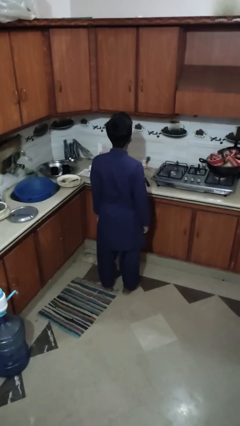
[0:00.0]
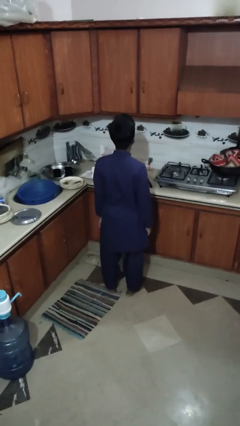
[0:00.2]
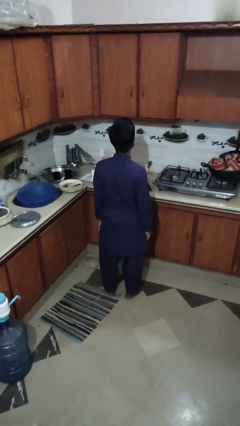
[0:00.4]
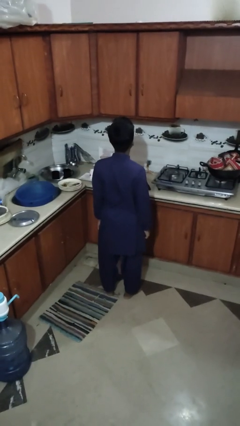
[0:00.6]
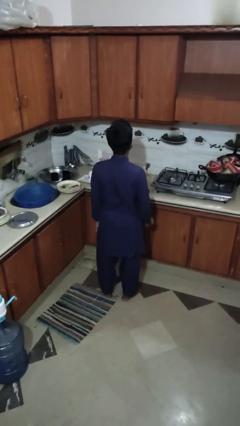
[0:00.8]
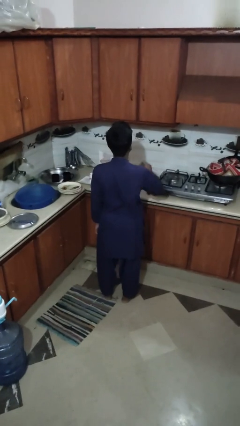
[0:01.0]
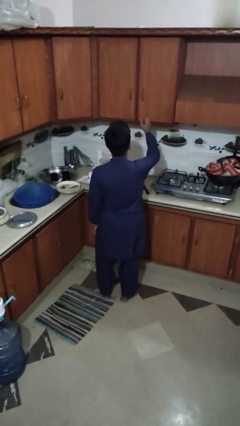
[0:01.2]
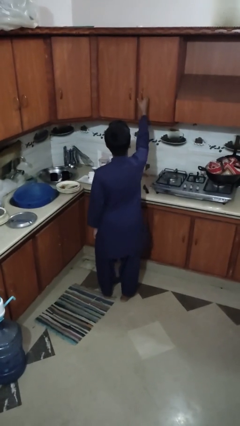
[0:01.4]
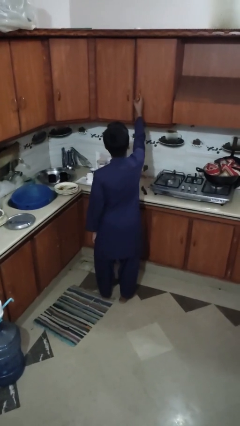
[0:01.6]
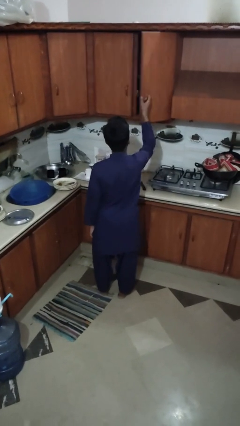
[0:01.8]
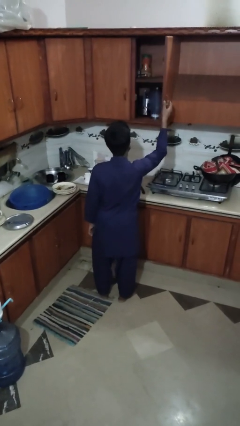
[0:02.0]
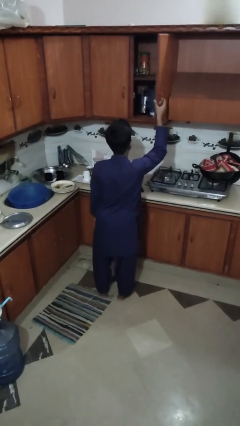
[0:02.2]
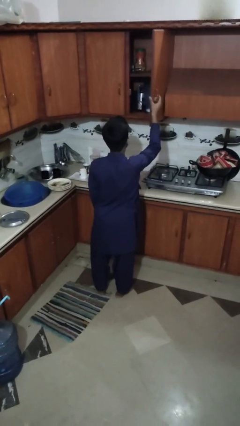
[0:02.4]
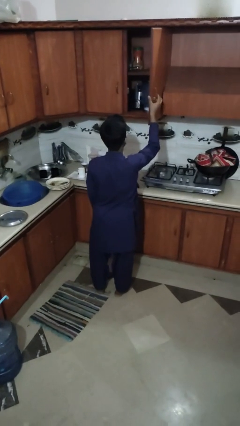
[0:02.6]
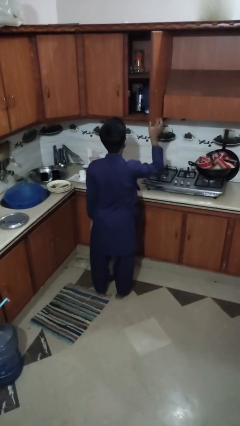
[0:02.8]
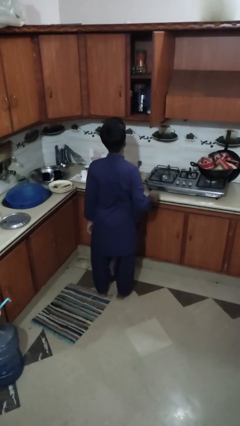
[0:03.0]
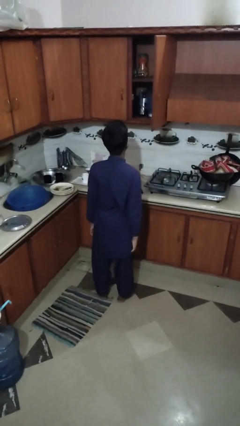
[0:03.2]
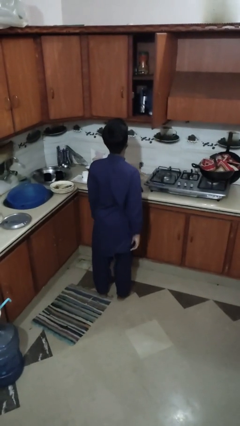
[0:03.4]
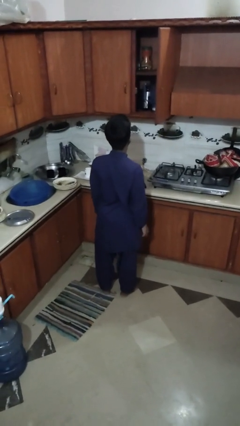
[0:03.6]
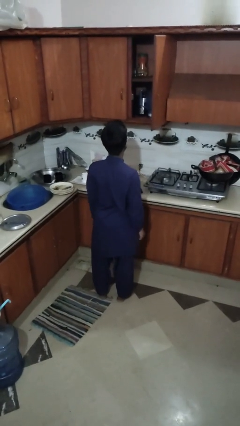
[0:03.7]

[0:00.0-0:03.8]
person opens cabinet

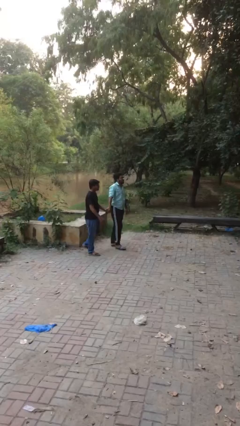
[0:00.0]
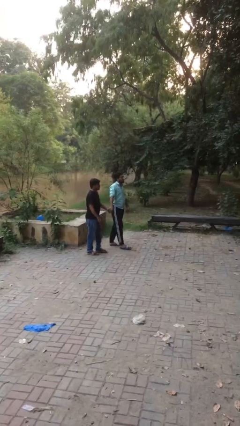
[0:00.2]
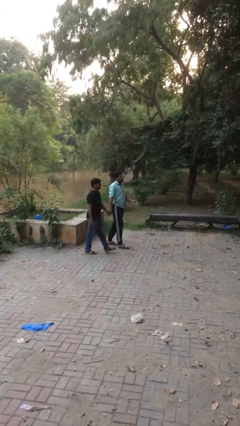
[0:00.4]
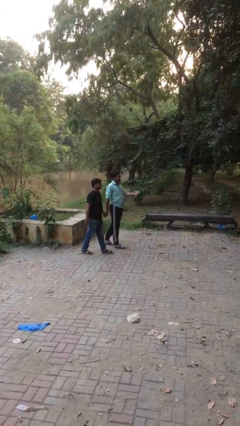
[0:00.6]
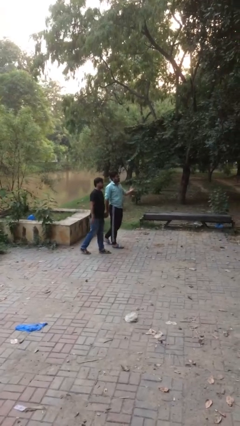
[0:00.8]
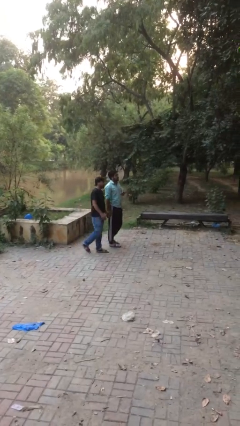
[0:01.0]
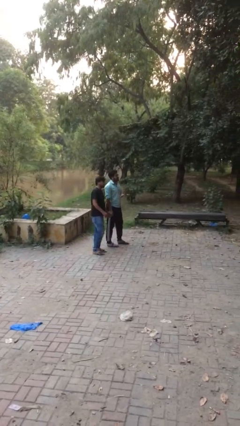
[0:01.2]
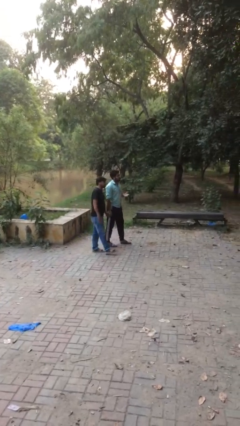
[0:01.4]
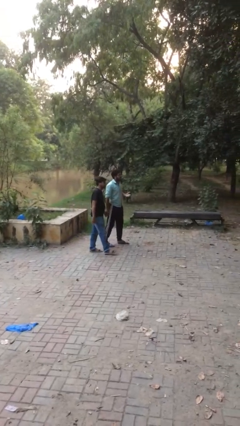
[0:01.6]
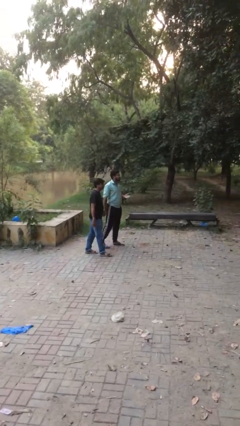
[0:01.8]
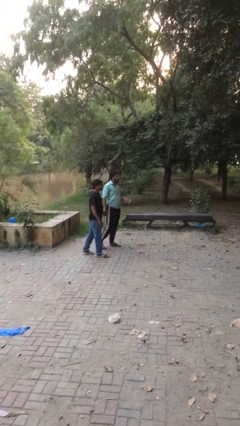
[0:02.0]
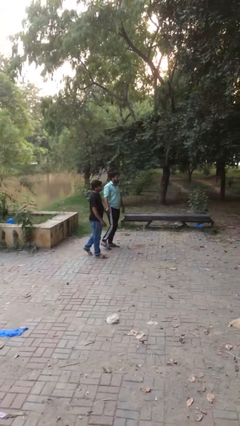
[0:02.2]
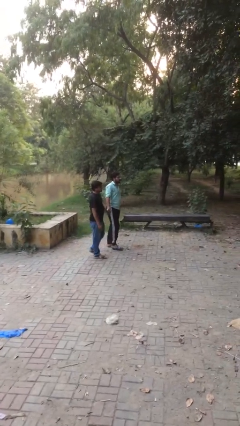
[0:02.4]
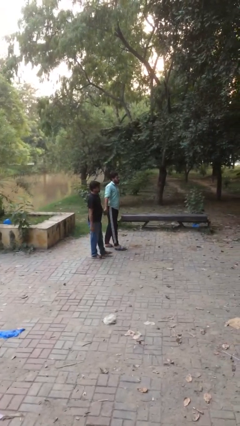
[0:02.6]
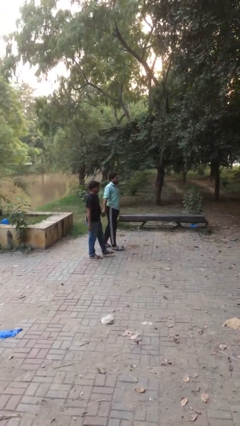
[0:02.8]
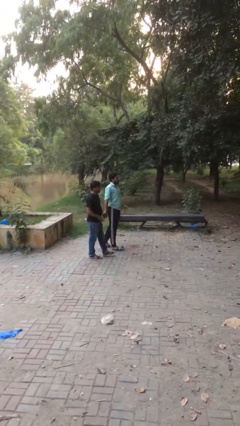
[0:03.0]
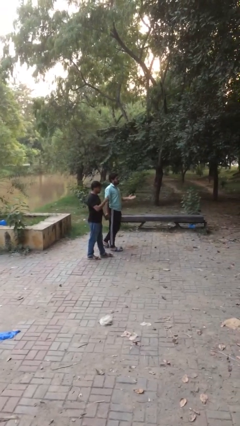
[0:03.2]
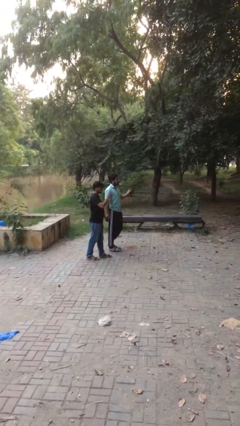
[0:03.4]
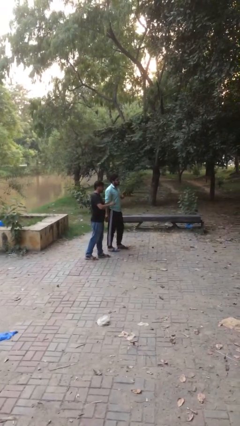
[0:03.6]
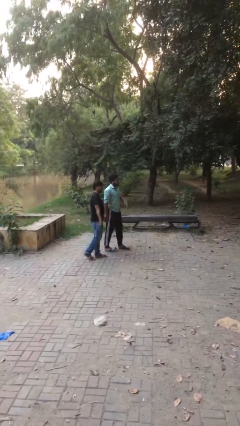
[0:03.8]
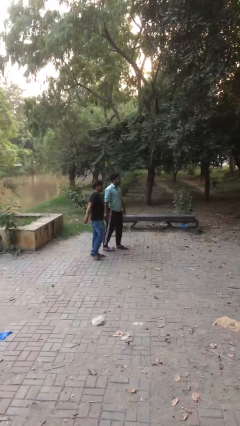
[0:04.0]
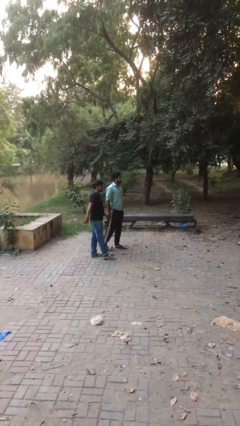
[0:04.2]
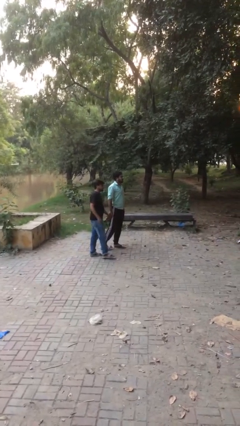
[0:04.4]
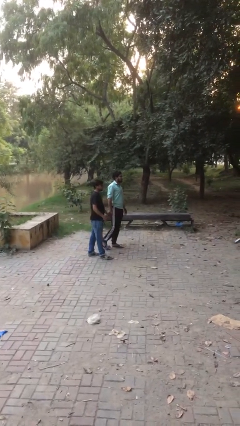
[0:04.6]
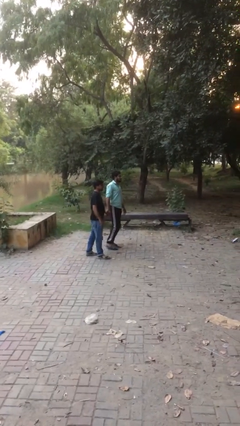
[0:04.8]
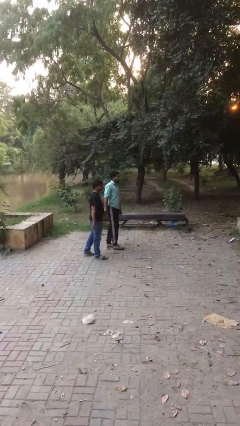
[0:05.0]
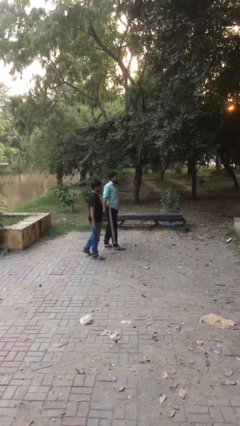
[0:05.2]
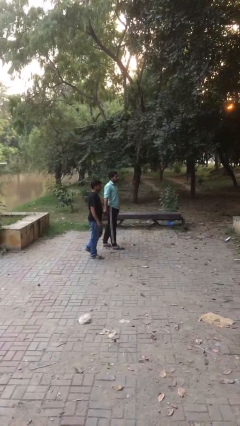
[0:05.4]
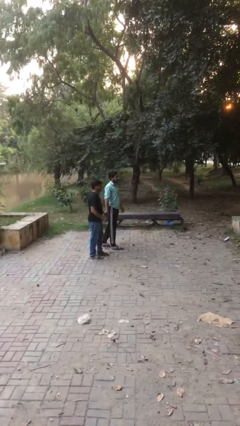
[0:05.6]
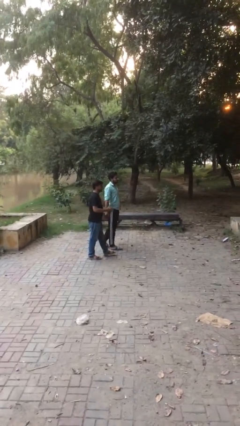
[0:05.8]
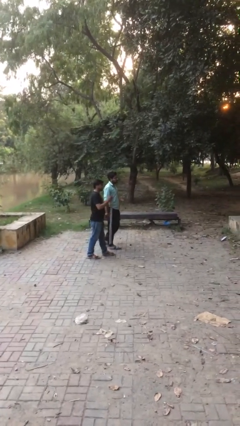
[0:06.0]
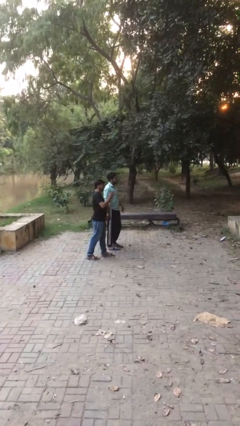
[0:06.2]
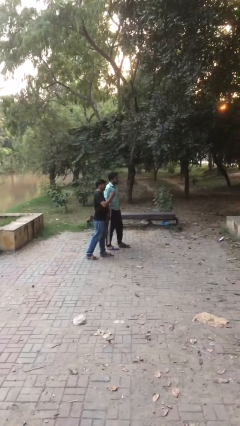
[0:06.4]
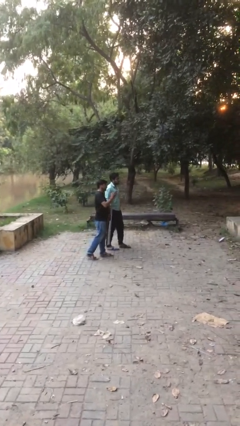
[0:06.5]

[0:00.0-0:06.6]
person holds hand

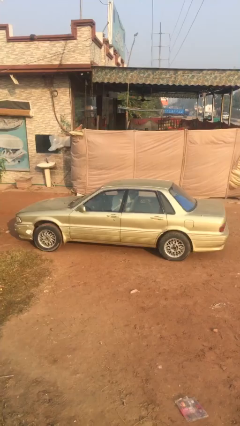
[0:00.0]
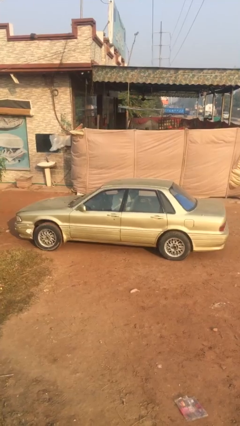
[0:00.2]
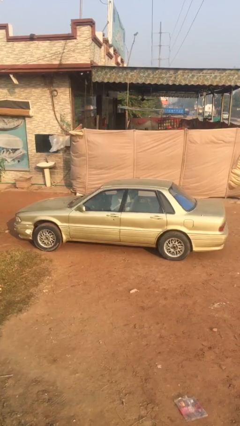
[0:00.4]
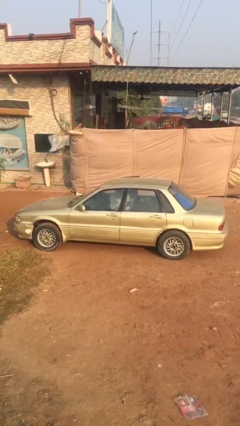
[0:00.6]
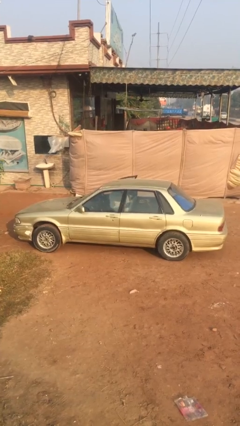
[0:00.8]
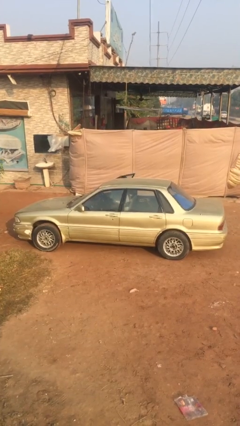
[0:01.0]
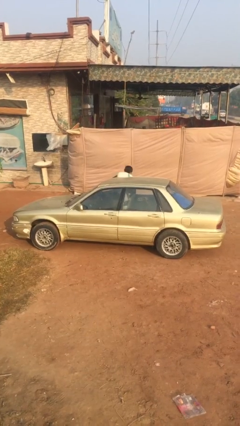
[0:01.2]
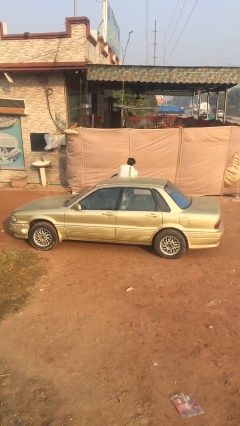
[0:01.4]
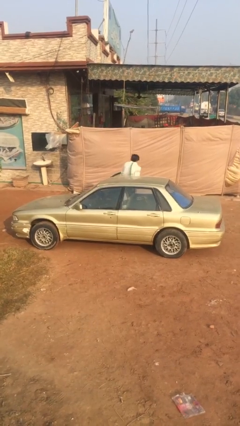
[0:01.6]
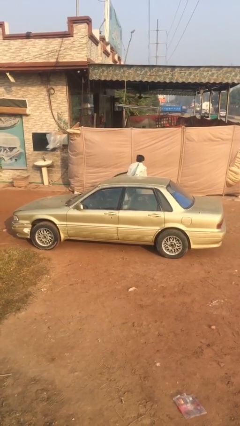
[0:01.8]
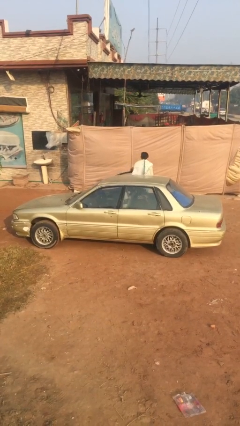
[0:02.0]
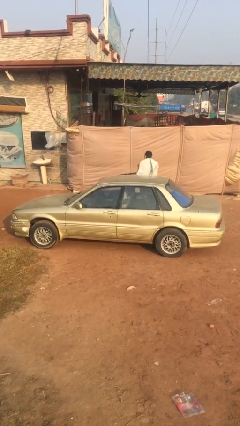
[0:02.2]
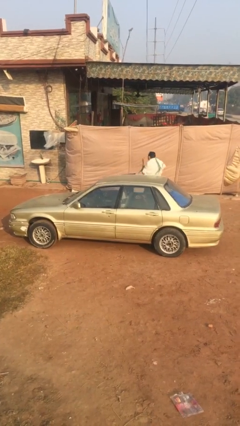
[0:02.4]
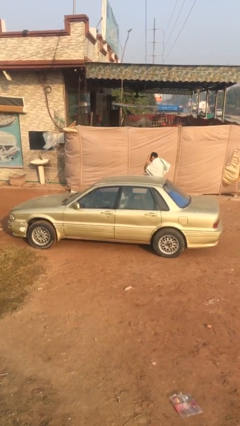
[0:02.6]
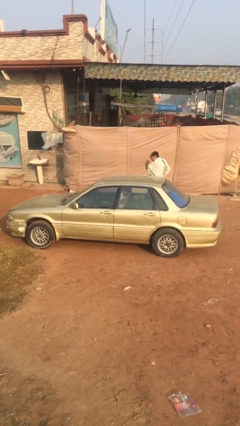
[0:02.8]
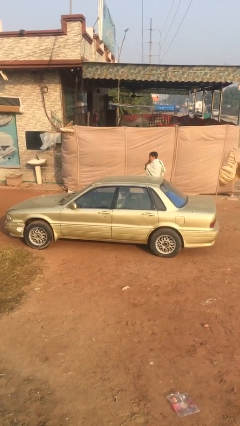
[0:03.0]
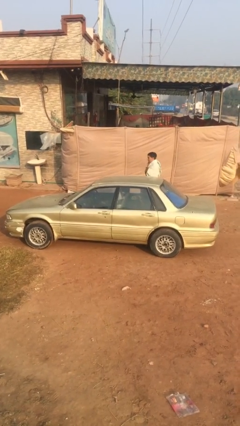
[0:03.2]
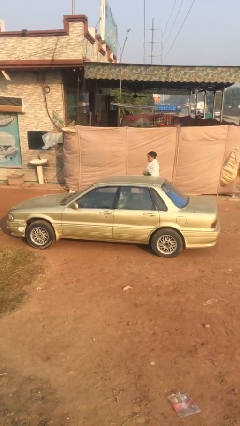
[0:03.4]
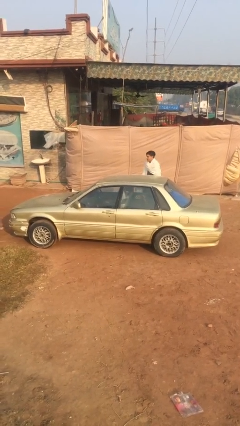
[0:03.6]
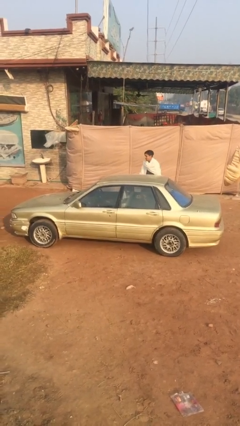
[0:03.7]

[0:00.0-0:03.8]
car drops off person

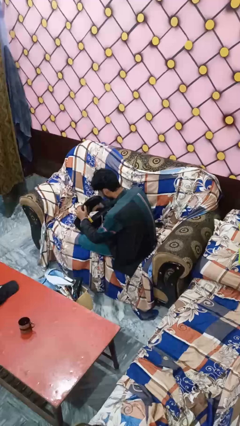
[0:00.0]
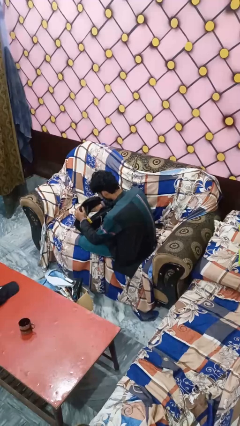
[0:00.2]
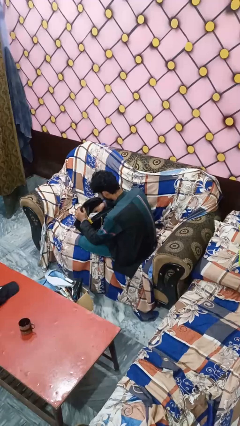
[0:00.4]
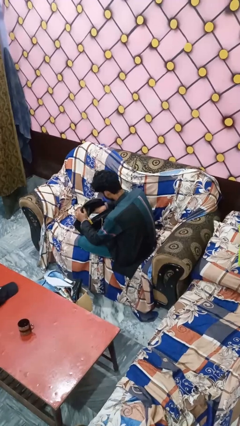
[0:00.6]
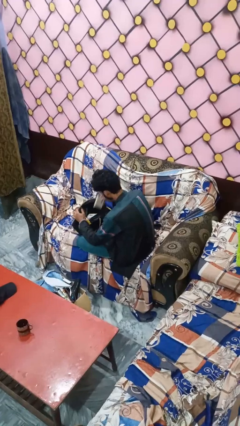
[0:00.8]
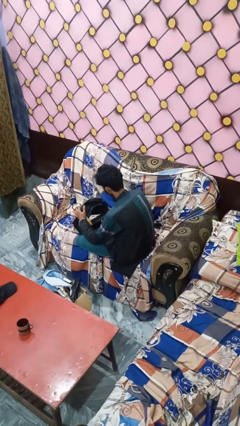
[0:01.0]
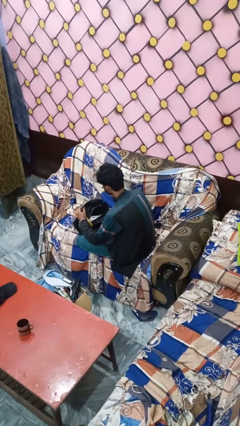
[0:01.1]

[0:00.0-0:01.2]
person searches in bag

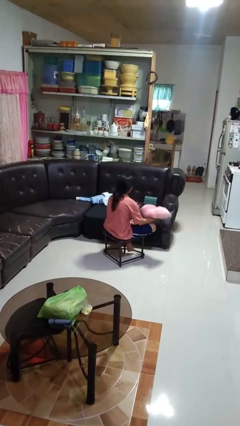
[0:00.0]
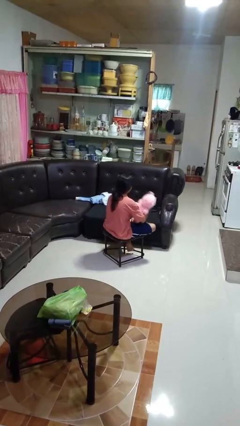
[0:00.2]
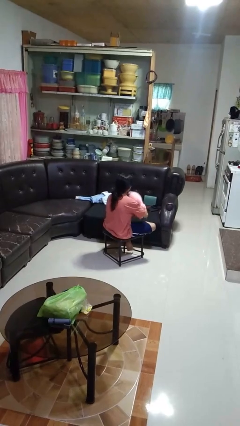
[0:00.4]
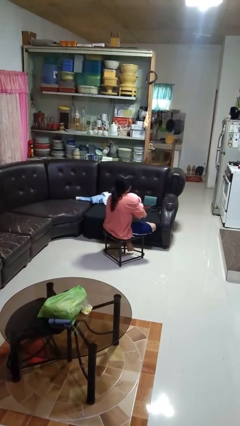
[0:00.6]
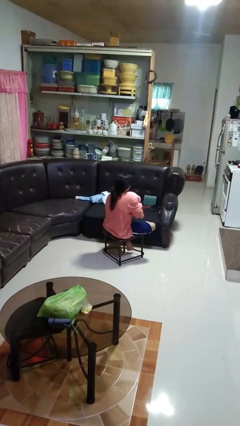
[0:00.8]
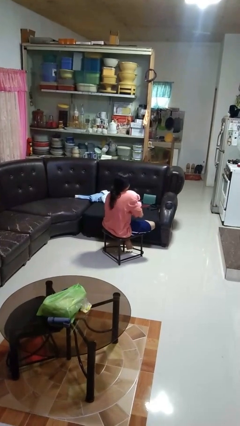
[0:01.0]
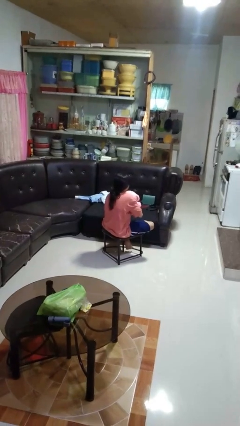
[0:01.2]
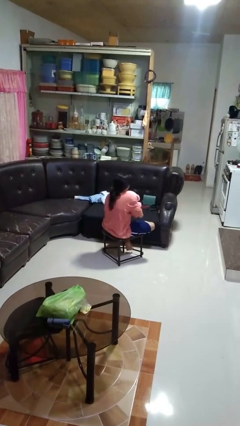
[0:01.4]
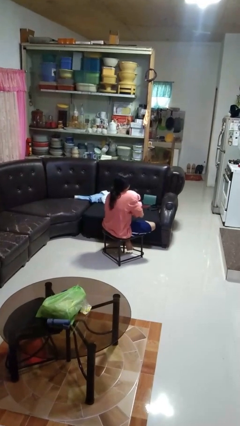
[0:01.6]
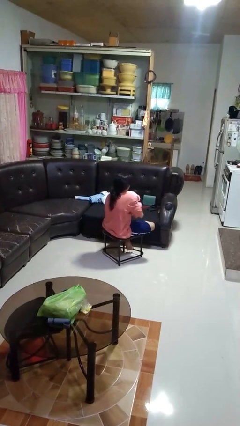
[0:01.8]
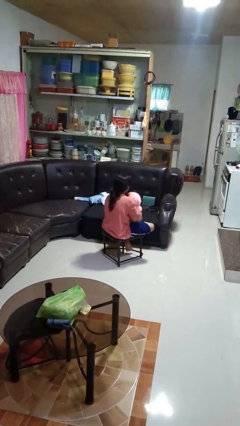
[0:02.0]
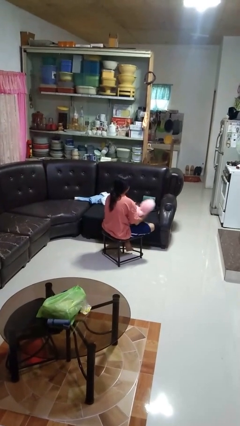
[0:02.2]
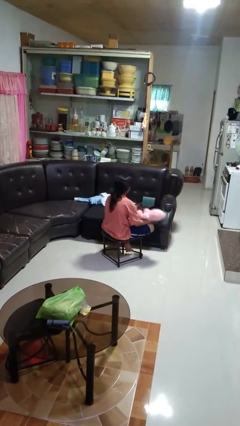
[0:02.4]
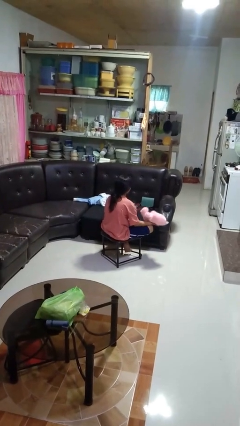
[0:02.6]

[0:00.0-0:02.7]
person hugs stuffed animal
